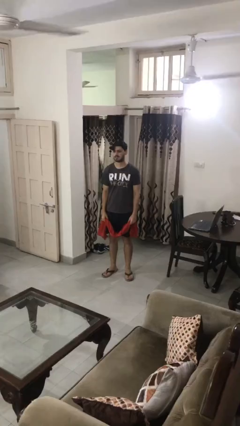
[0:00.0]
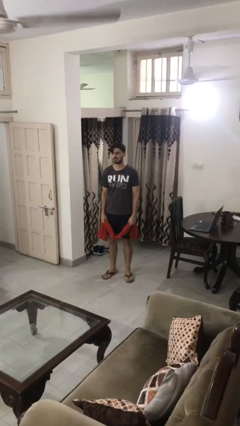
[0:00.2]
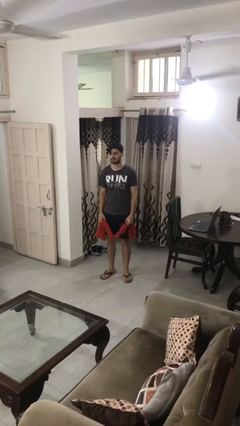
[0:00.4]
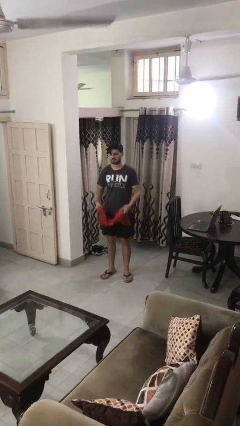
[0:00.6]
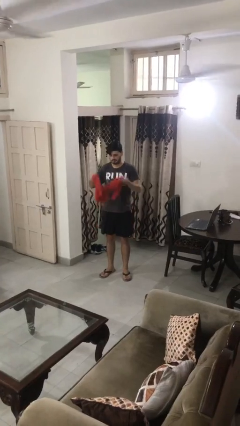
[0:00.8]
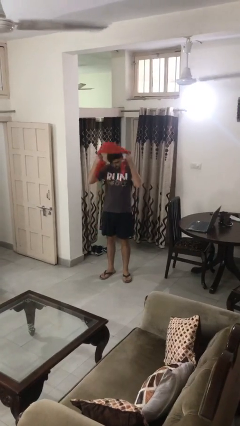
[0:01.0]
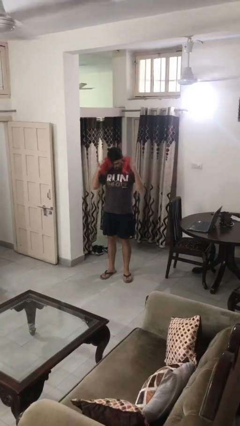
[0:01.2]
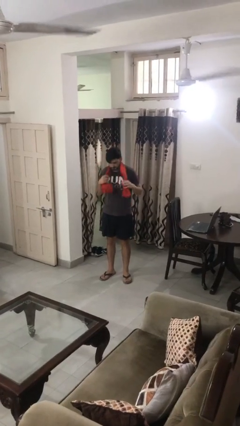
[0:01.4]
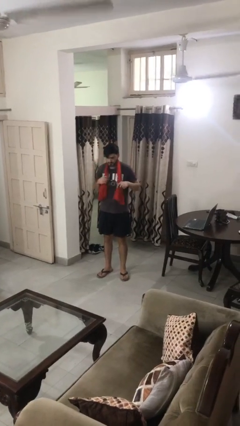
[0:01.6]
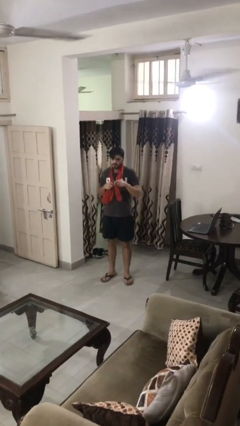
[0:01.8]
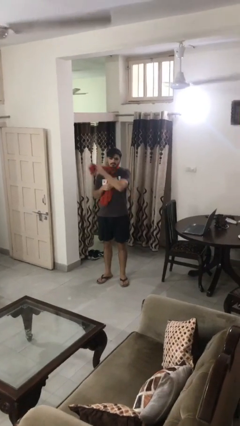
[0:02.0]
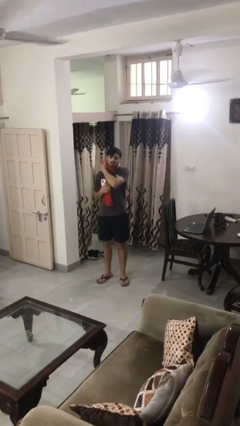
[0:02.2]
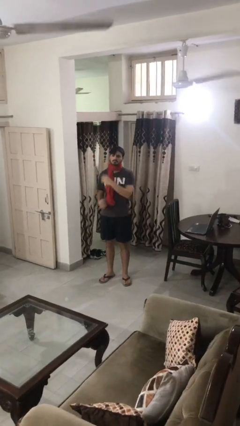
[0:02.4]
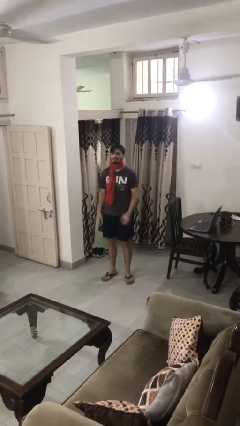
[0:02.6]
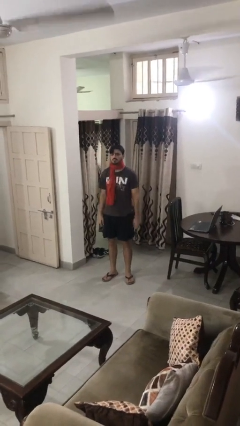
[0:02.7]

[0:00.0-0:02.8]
person puts on scarf

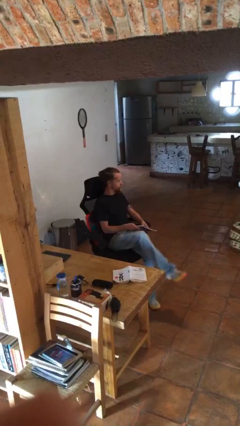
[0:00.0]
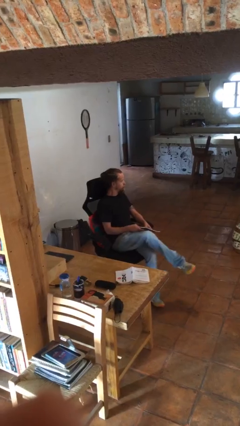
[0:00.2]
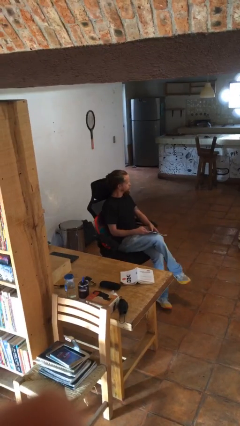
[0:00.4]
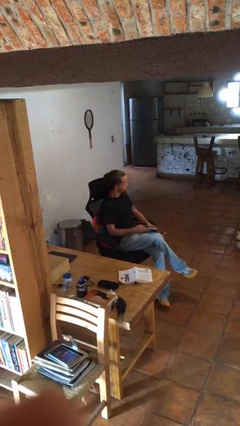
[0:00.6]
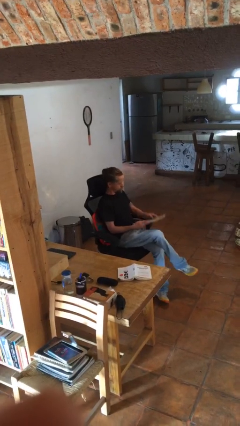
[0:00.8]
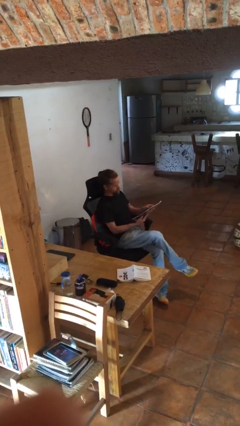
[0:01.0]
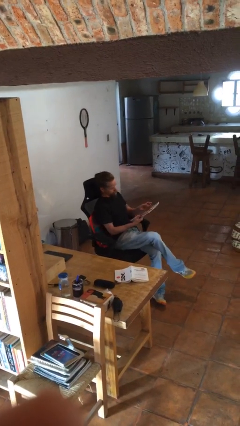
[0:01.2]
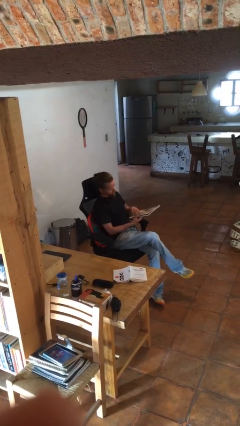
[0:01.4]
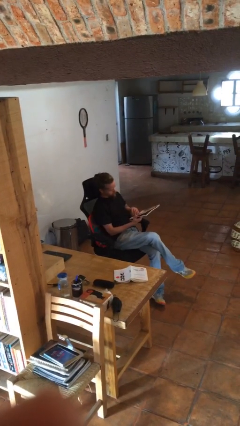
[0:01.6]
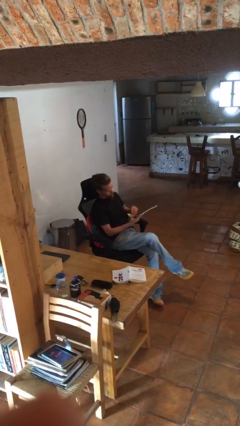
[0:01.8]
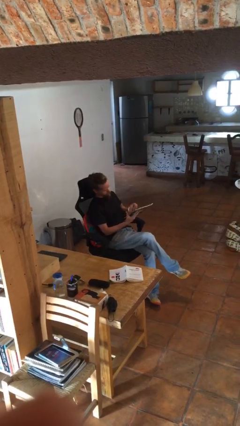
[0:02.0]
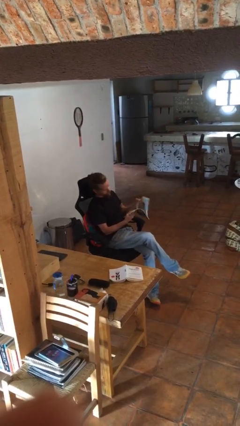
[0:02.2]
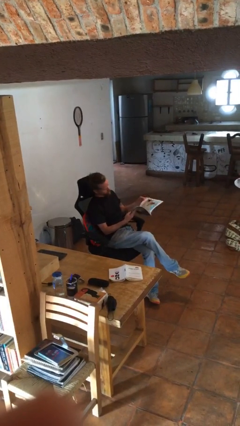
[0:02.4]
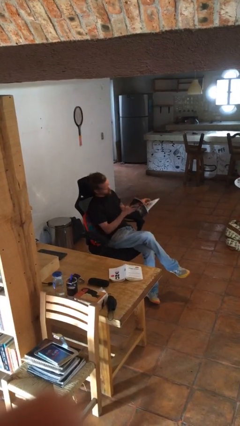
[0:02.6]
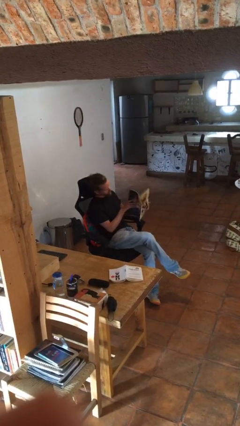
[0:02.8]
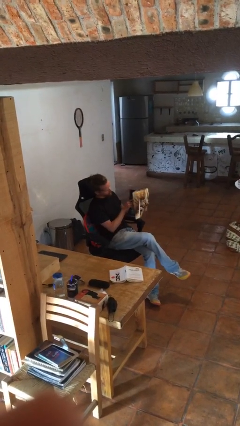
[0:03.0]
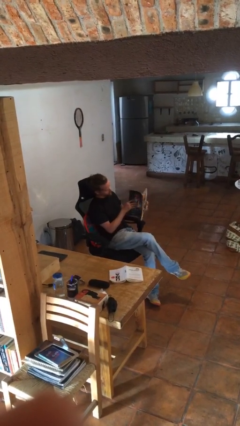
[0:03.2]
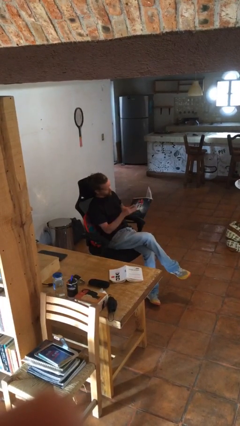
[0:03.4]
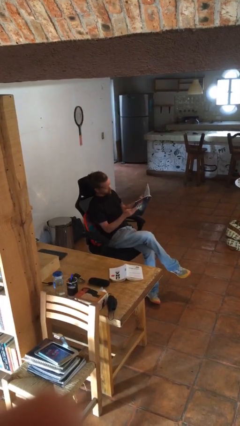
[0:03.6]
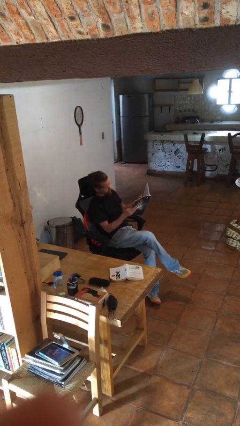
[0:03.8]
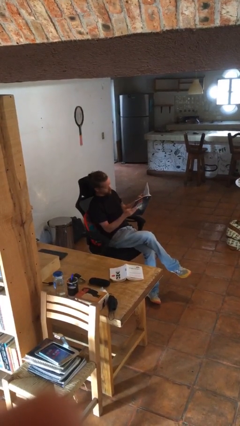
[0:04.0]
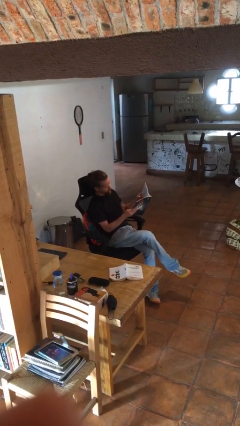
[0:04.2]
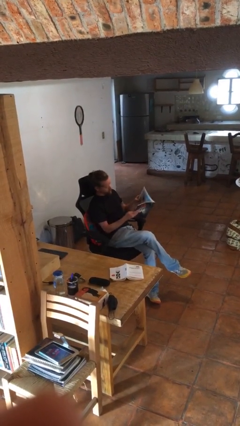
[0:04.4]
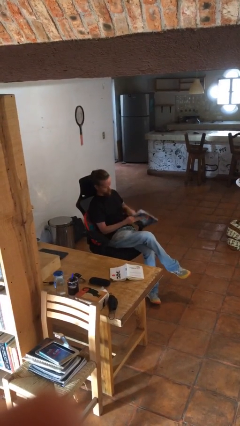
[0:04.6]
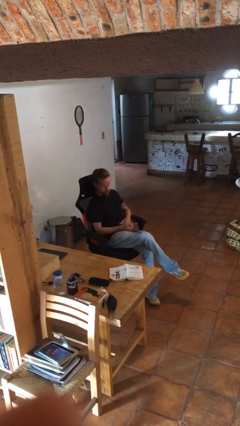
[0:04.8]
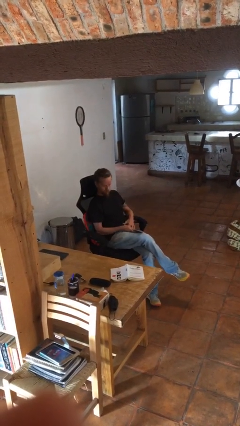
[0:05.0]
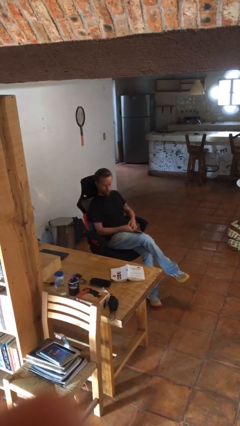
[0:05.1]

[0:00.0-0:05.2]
person reads magazine

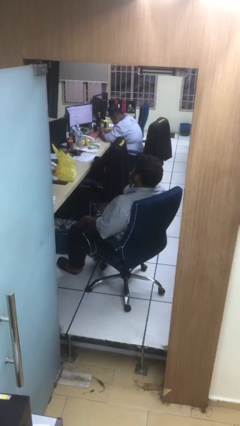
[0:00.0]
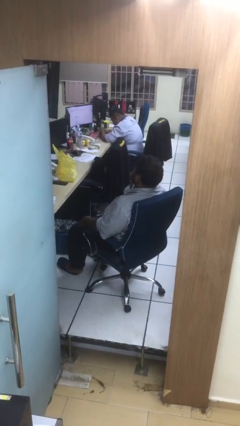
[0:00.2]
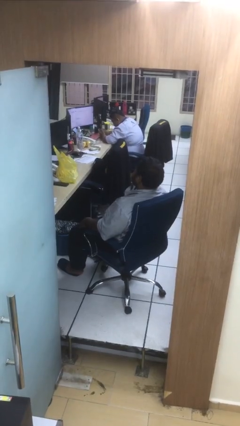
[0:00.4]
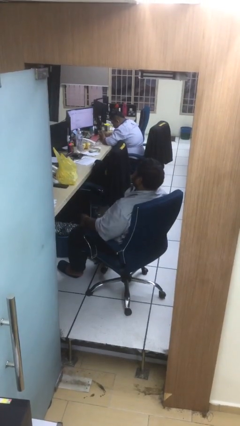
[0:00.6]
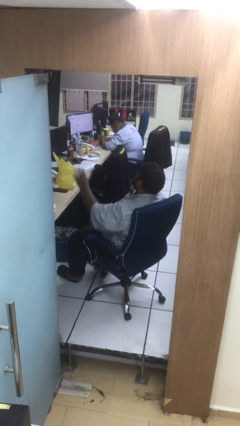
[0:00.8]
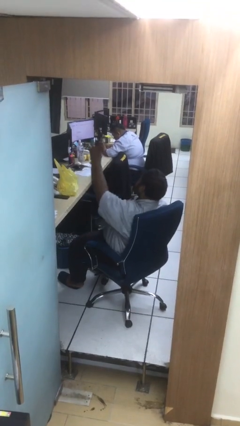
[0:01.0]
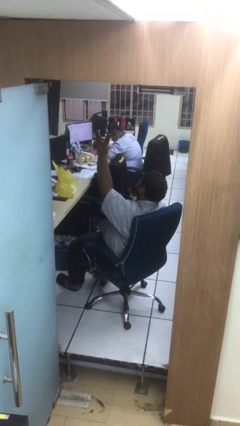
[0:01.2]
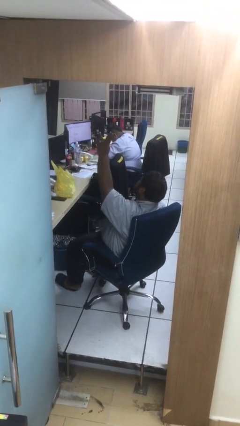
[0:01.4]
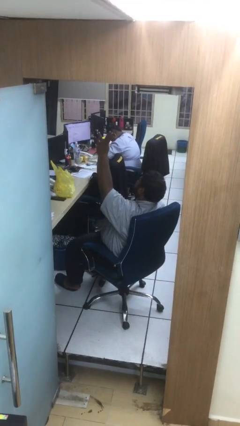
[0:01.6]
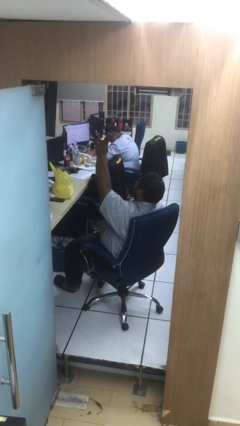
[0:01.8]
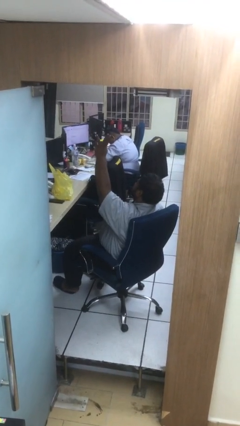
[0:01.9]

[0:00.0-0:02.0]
person gestures raise hand

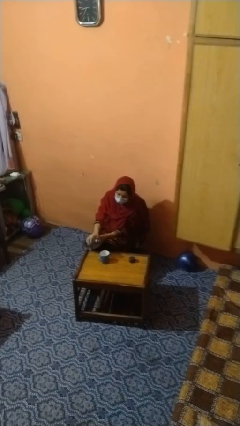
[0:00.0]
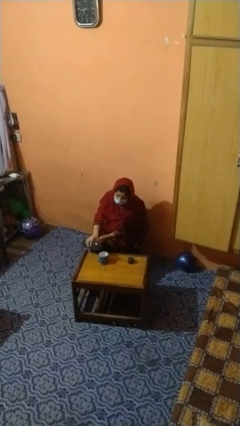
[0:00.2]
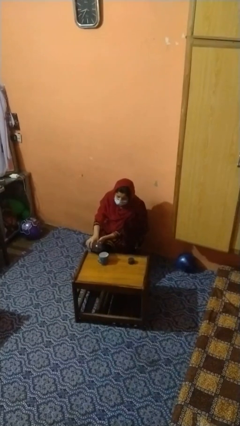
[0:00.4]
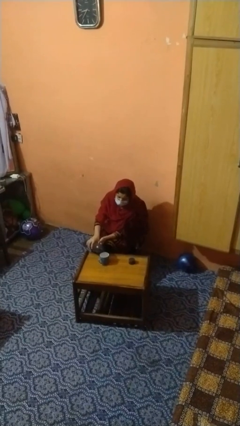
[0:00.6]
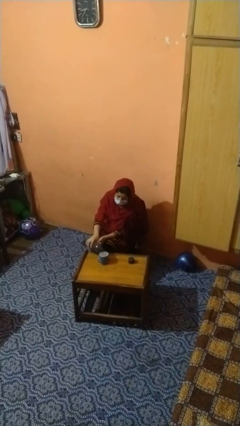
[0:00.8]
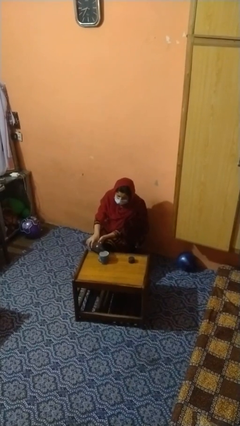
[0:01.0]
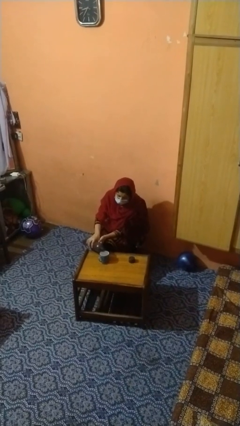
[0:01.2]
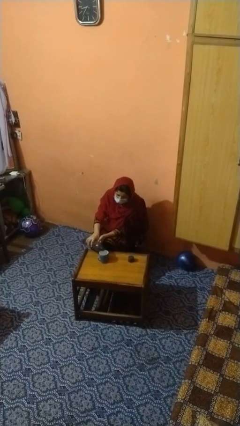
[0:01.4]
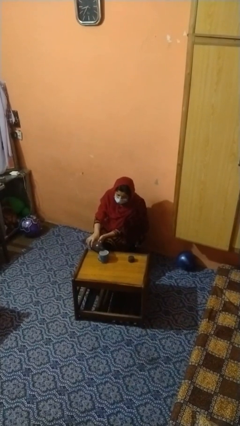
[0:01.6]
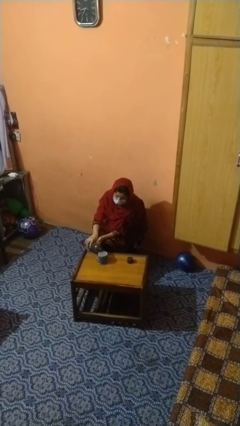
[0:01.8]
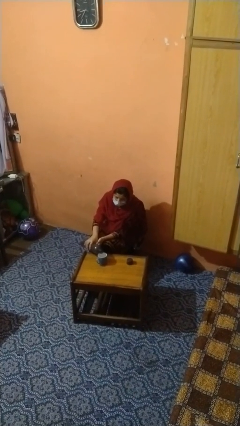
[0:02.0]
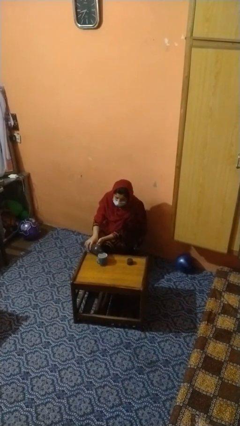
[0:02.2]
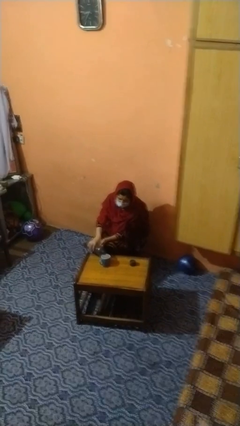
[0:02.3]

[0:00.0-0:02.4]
person pours liquid into cup

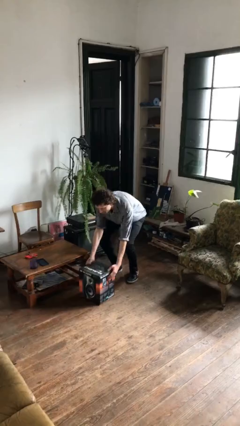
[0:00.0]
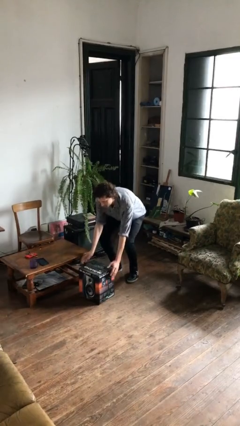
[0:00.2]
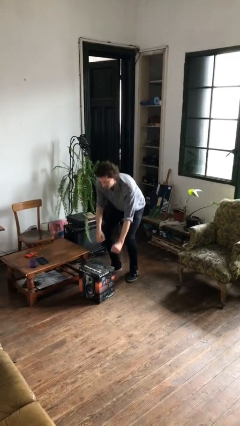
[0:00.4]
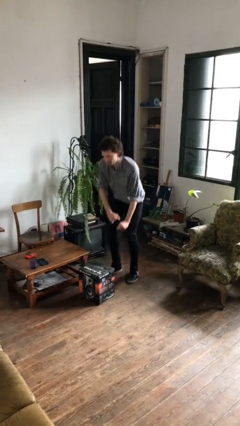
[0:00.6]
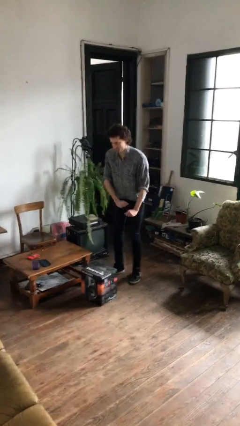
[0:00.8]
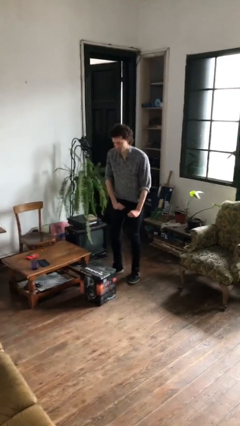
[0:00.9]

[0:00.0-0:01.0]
person puts down object on floor

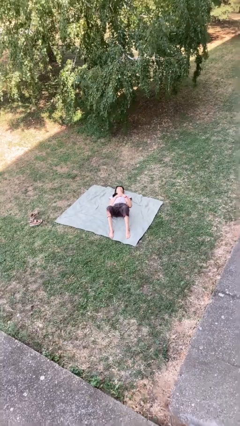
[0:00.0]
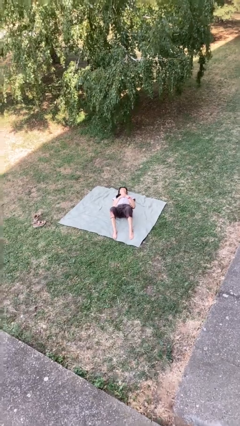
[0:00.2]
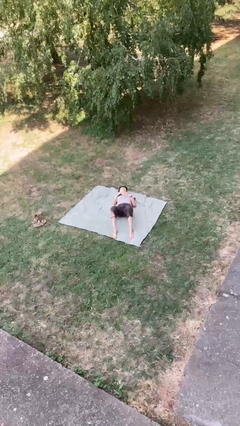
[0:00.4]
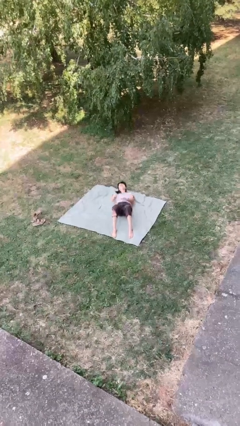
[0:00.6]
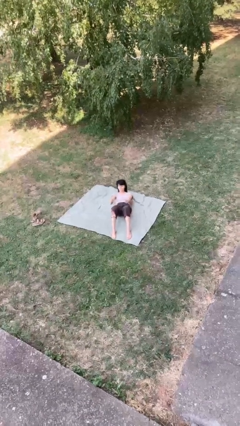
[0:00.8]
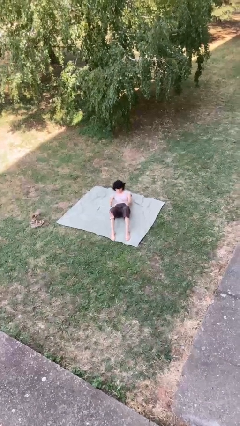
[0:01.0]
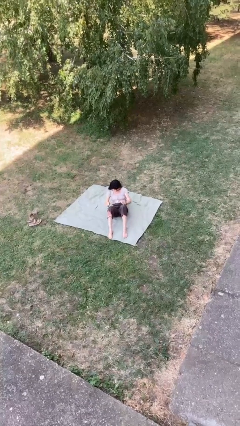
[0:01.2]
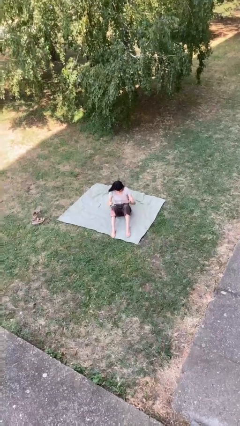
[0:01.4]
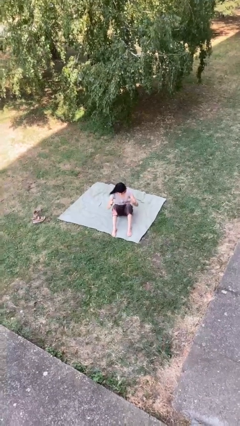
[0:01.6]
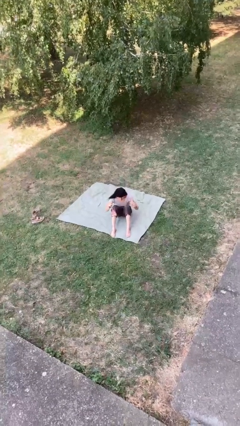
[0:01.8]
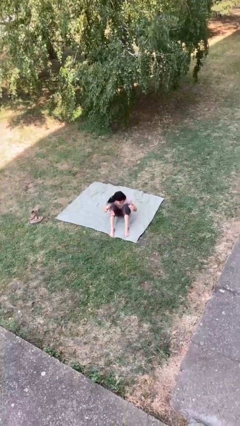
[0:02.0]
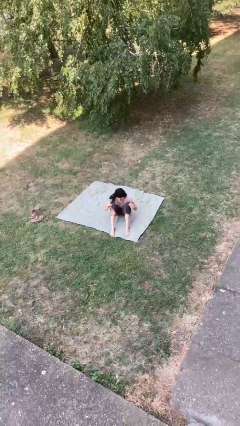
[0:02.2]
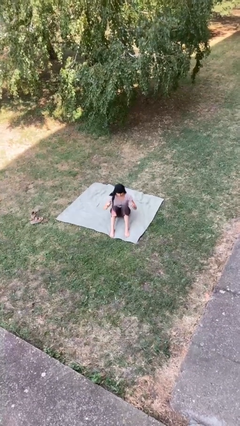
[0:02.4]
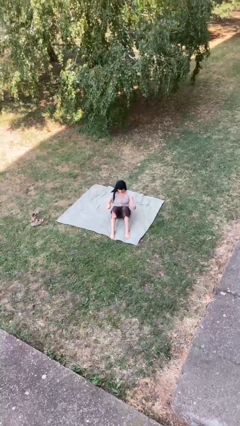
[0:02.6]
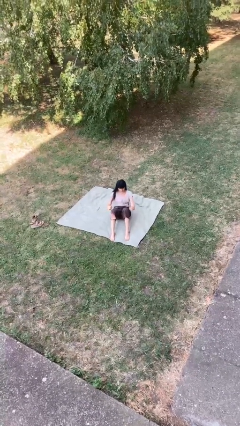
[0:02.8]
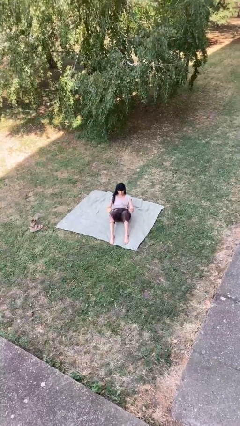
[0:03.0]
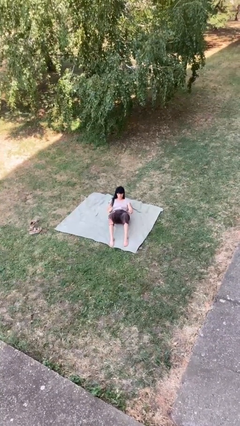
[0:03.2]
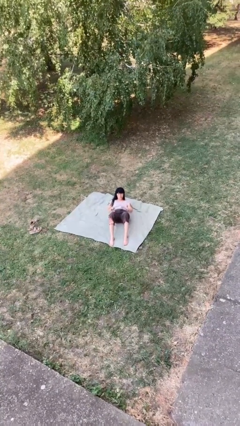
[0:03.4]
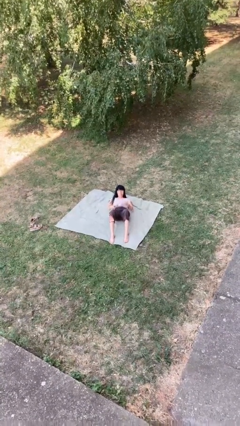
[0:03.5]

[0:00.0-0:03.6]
person exercises with situp
